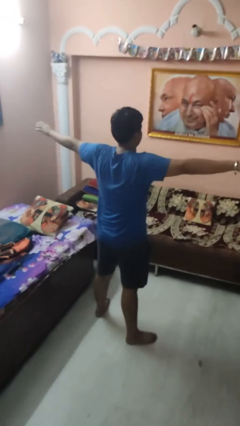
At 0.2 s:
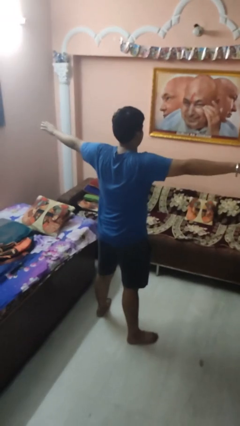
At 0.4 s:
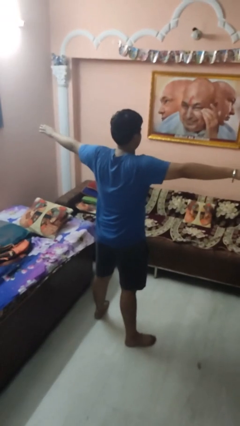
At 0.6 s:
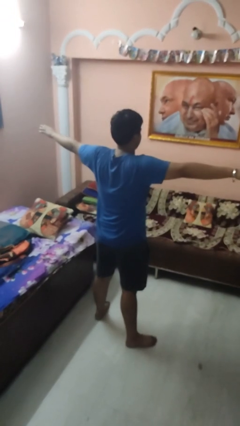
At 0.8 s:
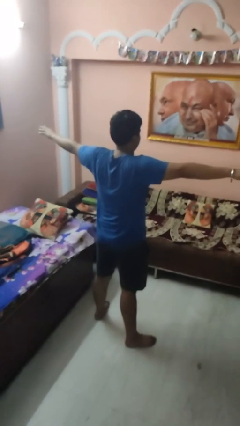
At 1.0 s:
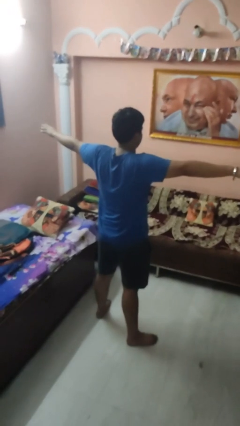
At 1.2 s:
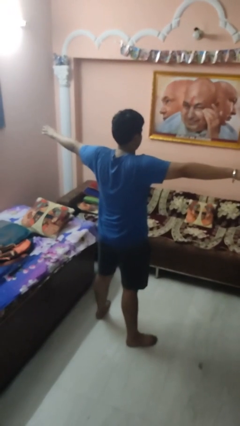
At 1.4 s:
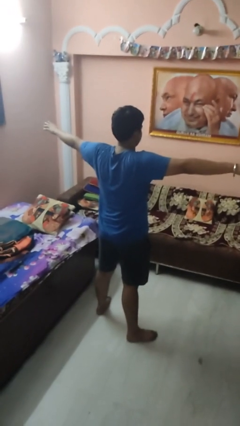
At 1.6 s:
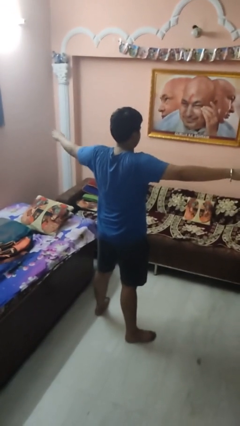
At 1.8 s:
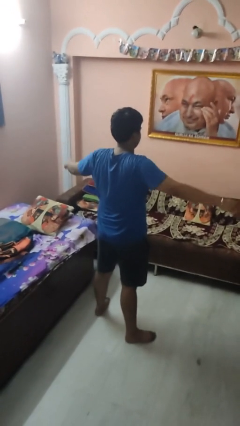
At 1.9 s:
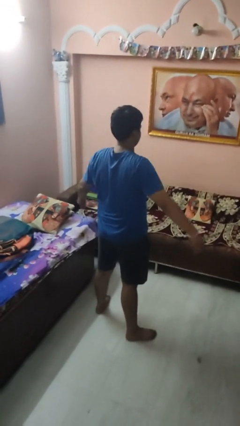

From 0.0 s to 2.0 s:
person stretches arms to side

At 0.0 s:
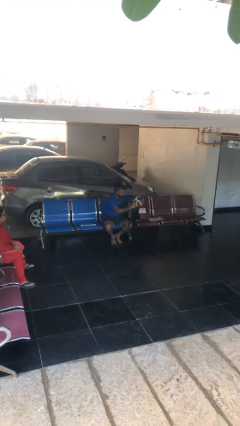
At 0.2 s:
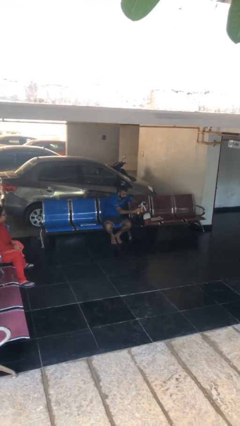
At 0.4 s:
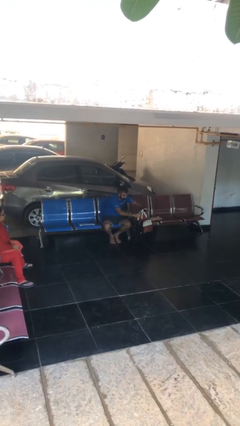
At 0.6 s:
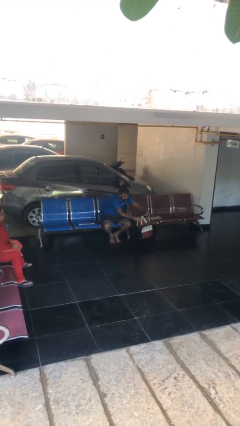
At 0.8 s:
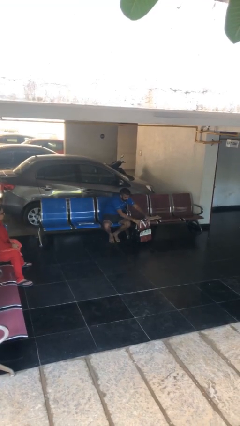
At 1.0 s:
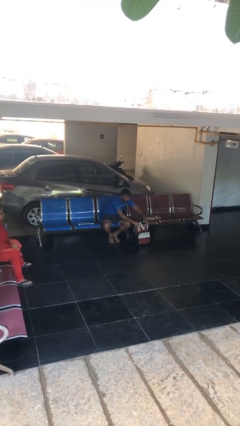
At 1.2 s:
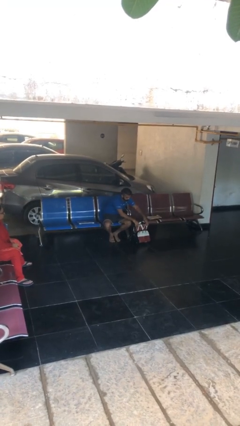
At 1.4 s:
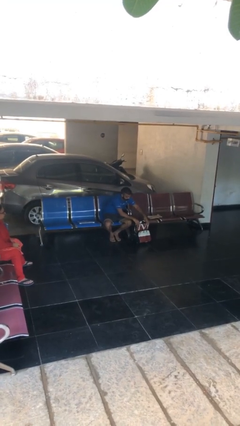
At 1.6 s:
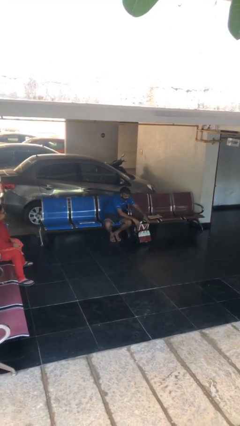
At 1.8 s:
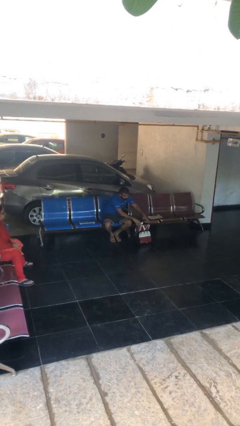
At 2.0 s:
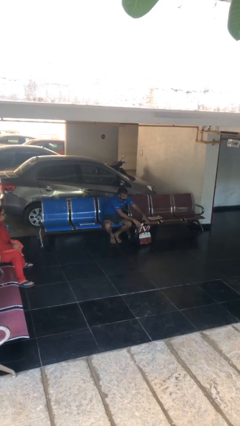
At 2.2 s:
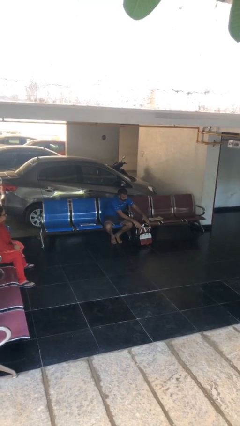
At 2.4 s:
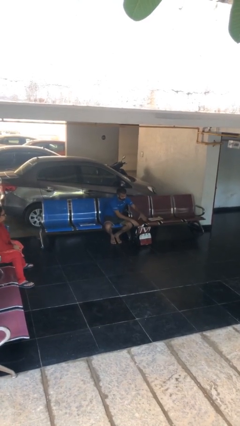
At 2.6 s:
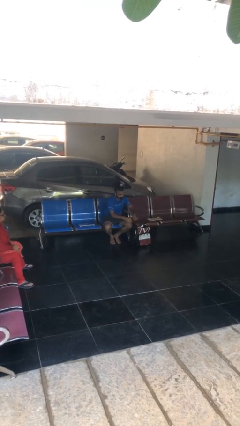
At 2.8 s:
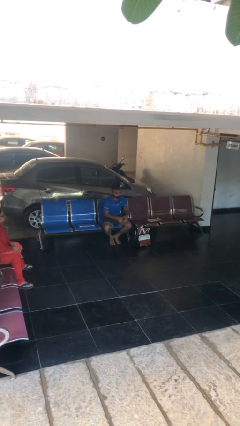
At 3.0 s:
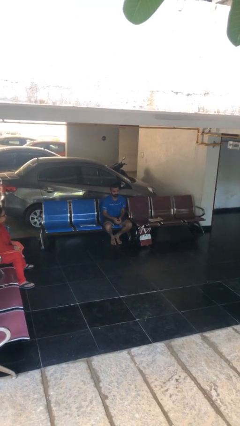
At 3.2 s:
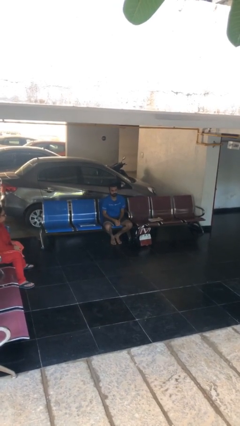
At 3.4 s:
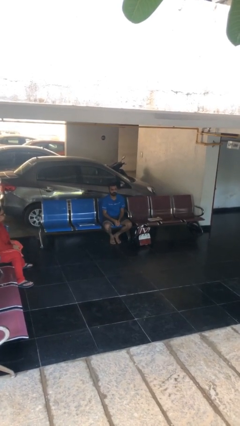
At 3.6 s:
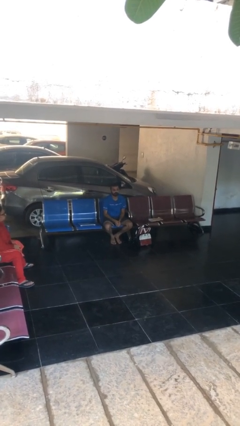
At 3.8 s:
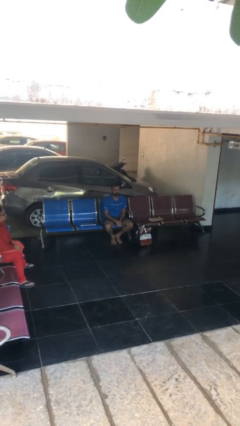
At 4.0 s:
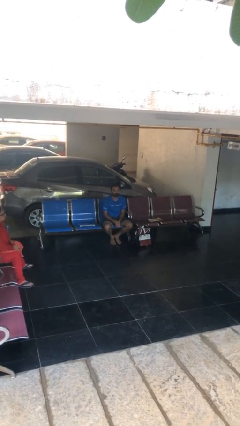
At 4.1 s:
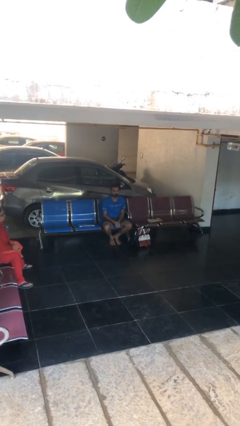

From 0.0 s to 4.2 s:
person puts down object on floor

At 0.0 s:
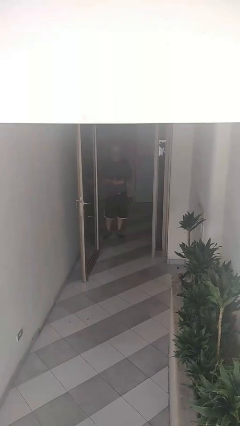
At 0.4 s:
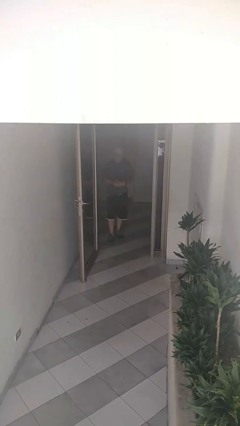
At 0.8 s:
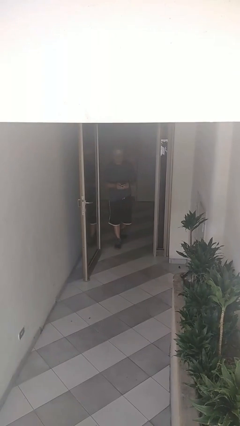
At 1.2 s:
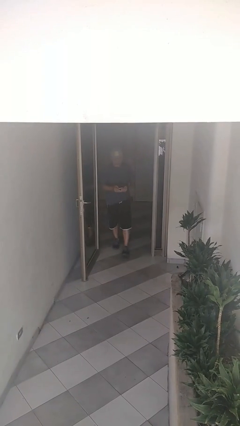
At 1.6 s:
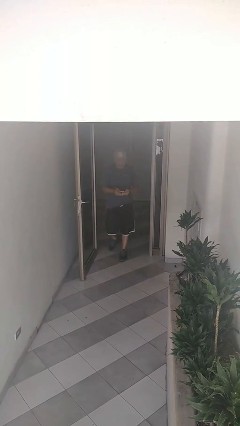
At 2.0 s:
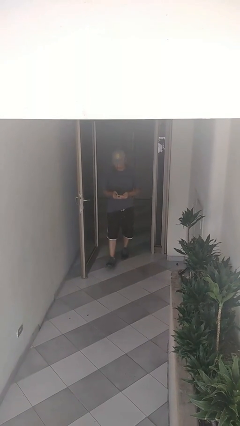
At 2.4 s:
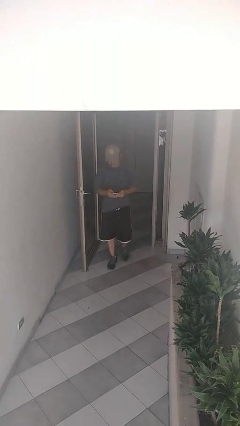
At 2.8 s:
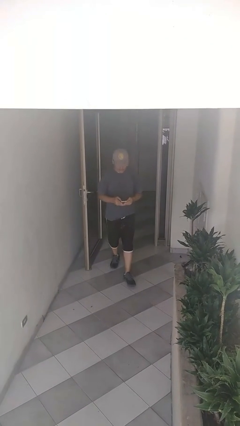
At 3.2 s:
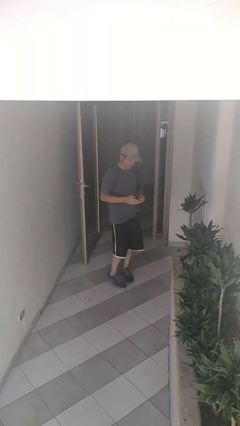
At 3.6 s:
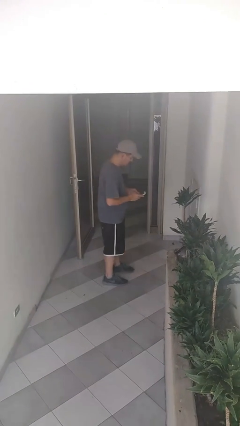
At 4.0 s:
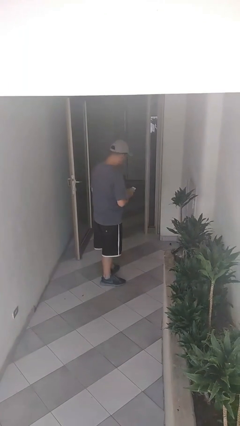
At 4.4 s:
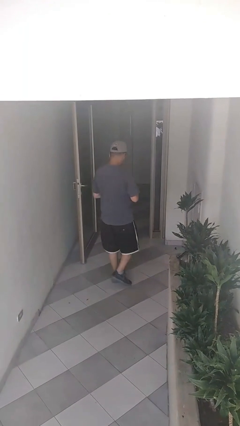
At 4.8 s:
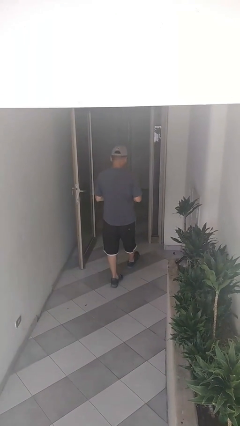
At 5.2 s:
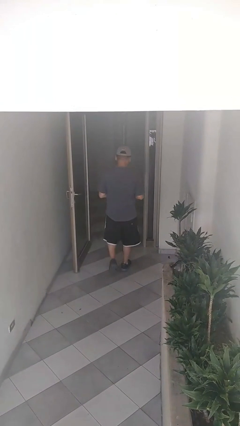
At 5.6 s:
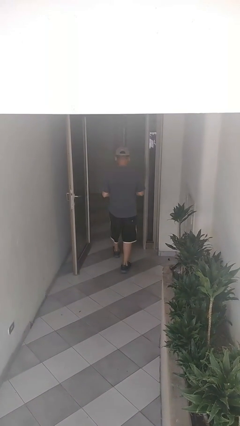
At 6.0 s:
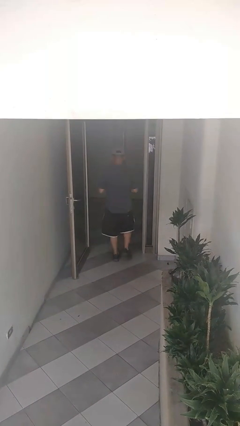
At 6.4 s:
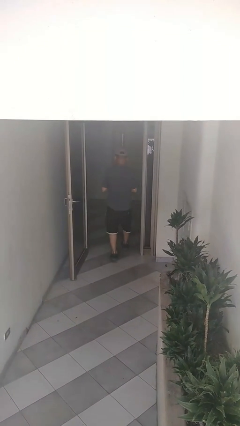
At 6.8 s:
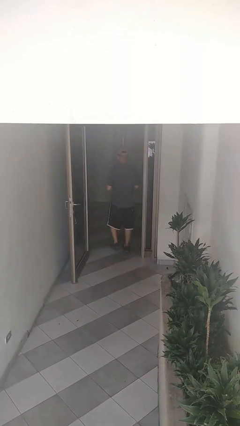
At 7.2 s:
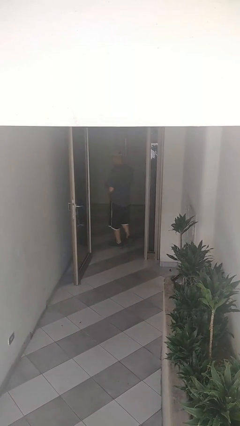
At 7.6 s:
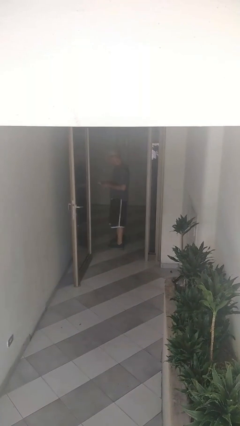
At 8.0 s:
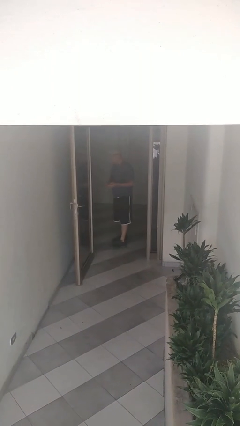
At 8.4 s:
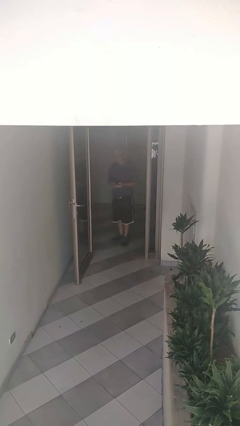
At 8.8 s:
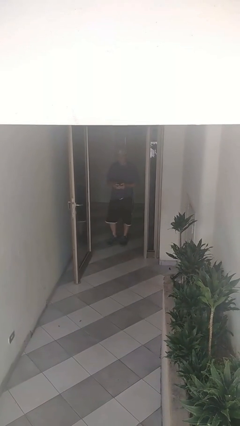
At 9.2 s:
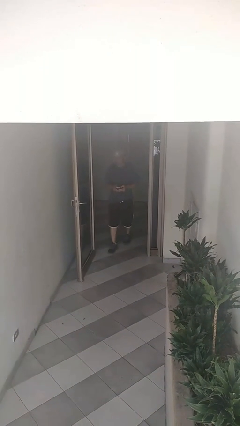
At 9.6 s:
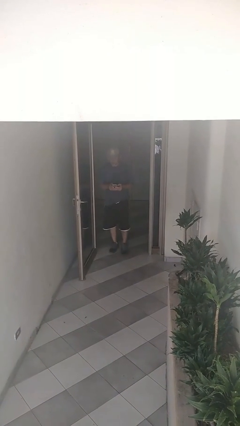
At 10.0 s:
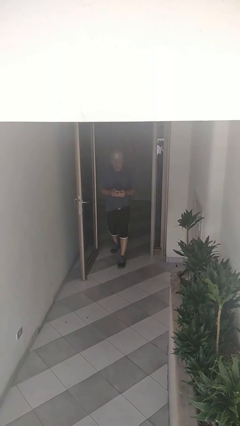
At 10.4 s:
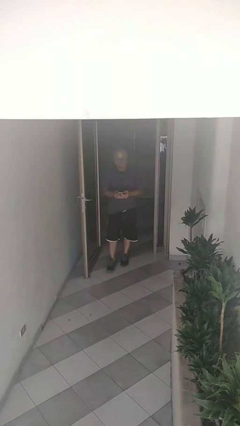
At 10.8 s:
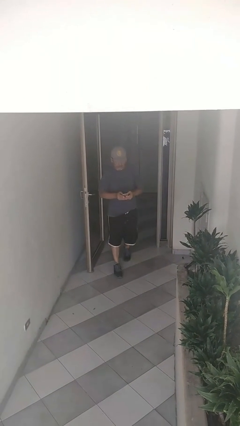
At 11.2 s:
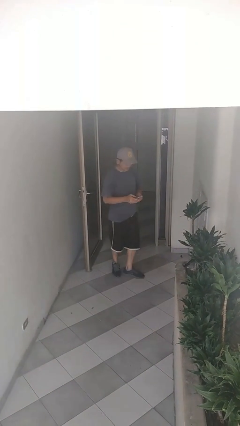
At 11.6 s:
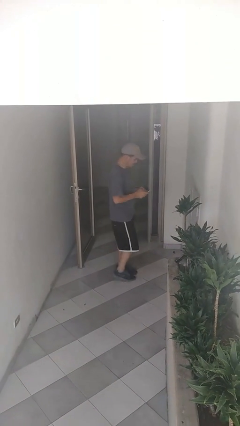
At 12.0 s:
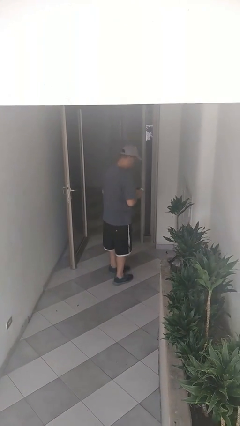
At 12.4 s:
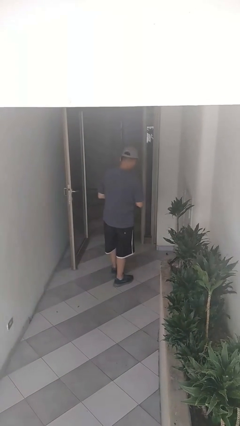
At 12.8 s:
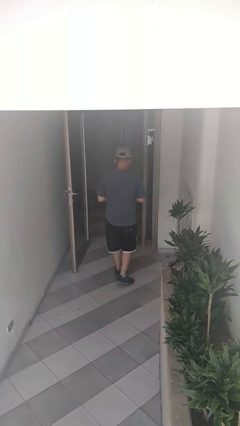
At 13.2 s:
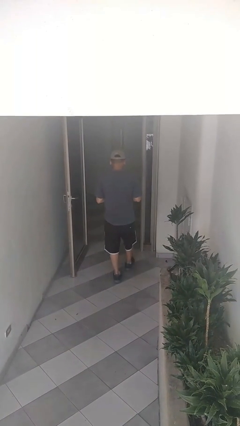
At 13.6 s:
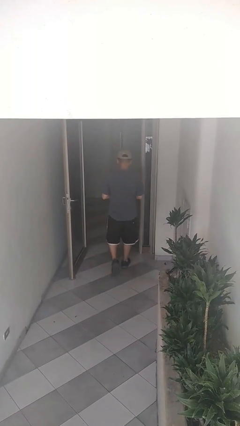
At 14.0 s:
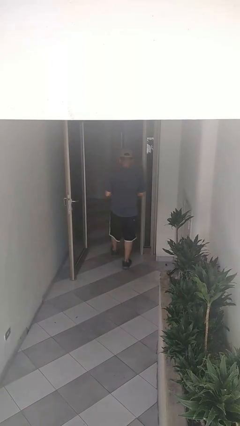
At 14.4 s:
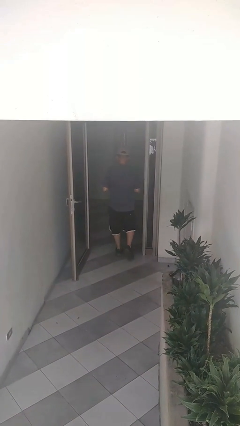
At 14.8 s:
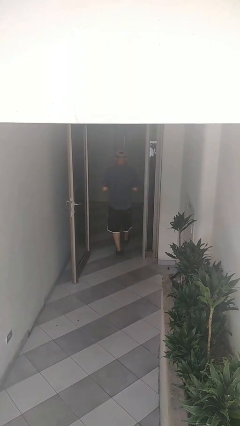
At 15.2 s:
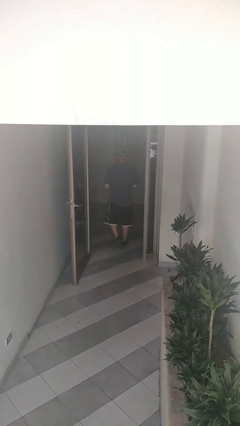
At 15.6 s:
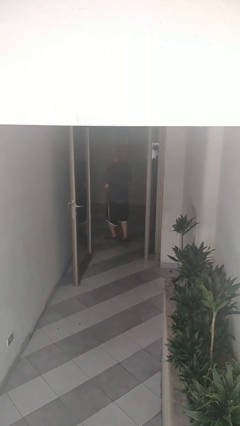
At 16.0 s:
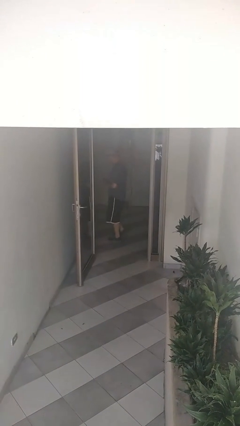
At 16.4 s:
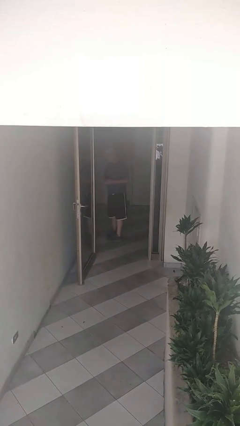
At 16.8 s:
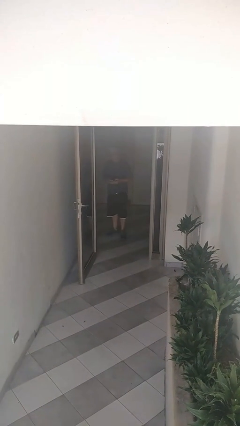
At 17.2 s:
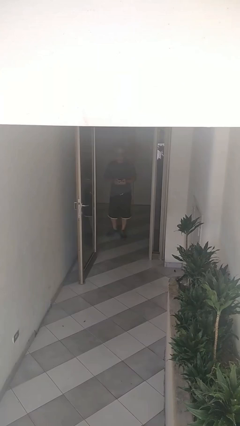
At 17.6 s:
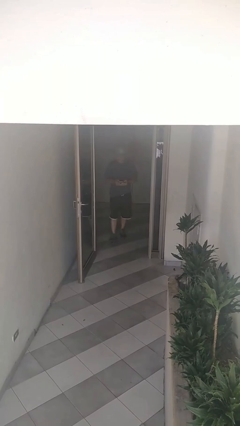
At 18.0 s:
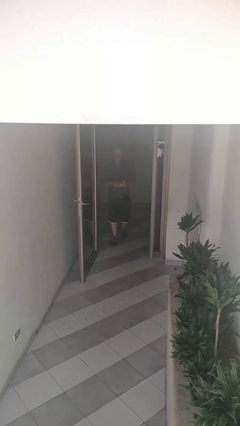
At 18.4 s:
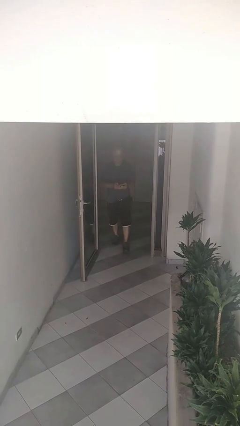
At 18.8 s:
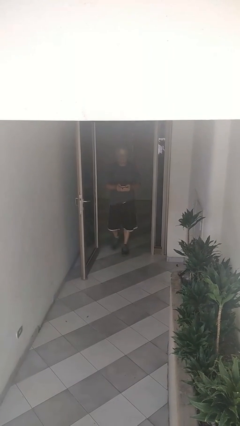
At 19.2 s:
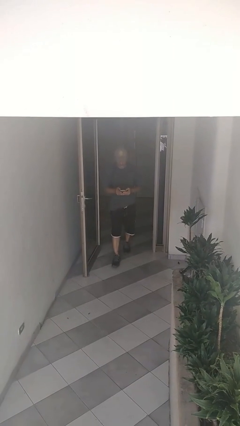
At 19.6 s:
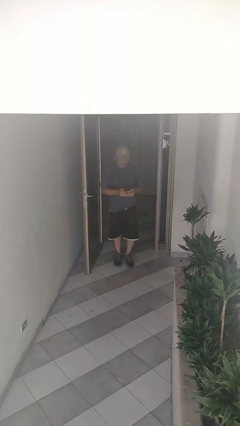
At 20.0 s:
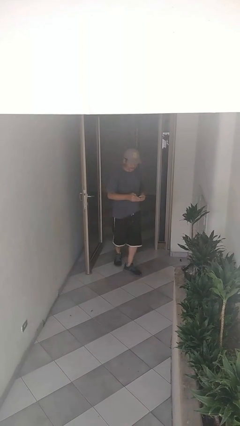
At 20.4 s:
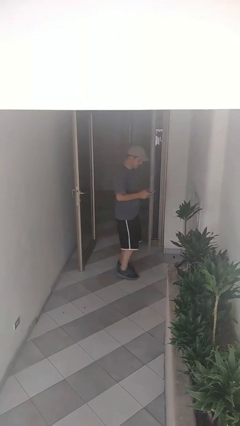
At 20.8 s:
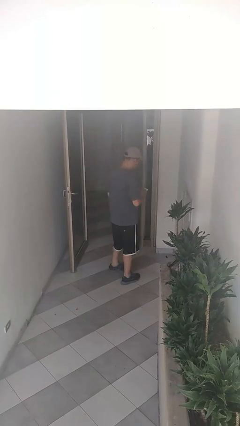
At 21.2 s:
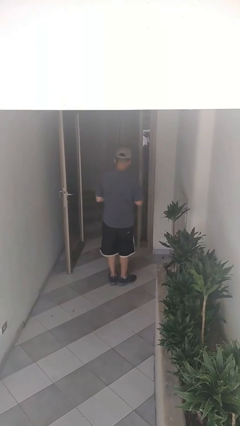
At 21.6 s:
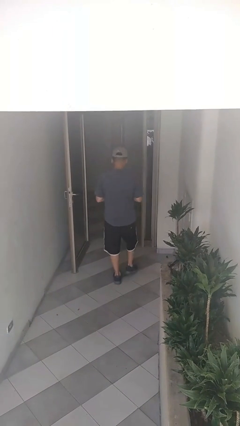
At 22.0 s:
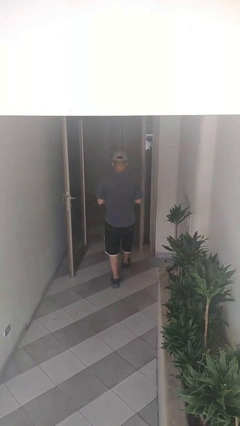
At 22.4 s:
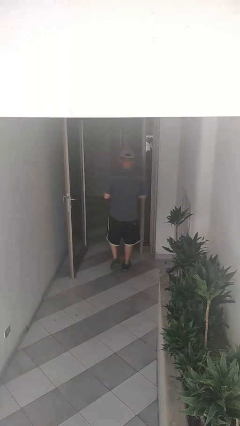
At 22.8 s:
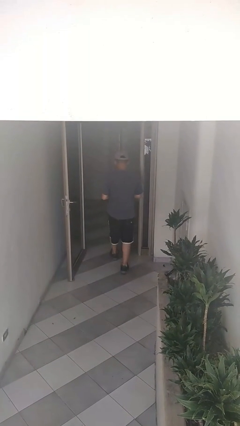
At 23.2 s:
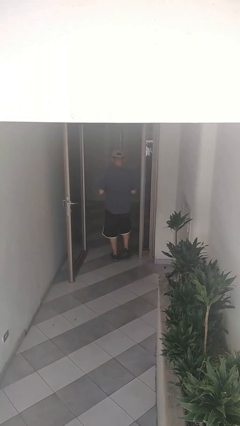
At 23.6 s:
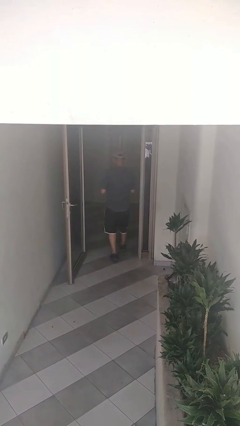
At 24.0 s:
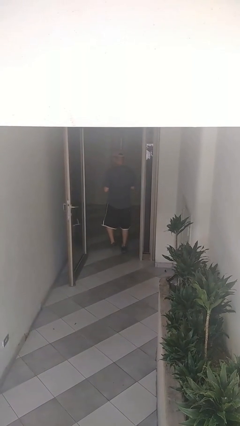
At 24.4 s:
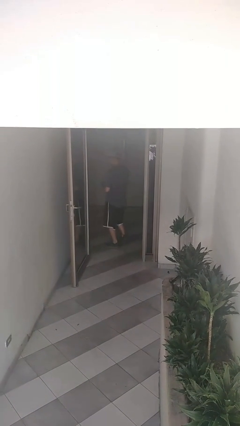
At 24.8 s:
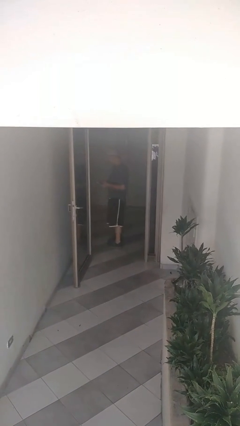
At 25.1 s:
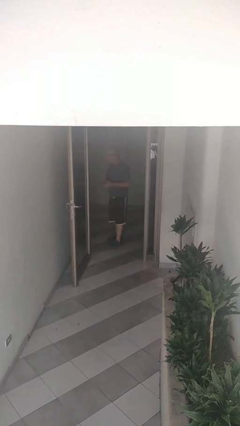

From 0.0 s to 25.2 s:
person texts on phone
